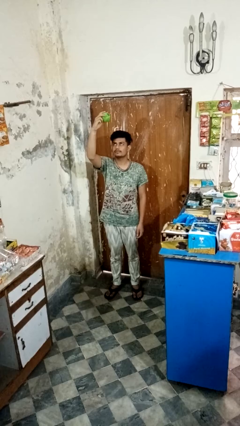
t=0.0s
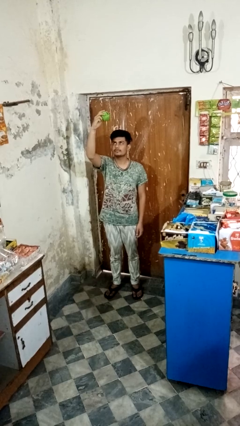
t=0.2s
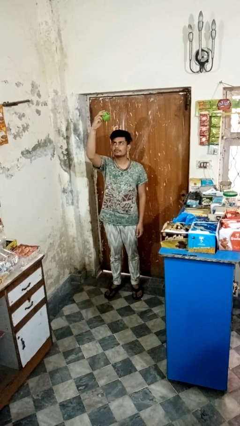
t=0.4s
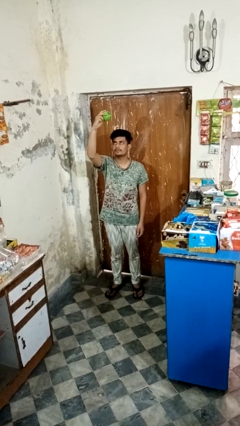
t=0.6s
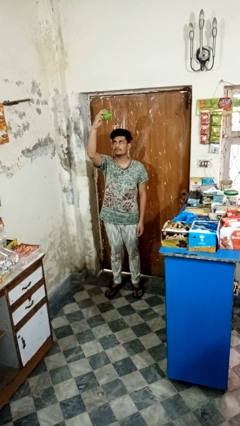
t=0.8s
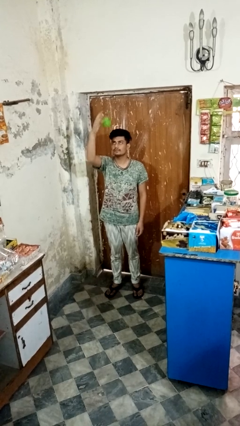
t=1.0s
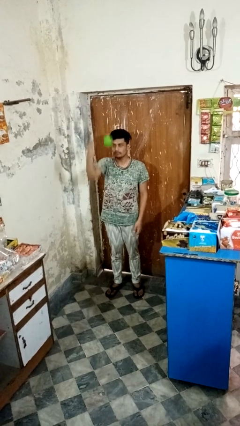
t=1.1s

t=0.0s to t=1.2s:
person drops object

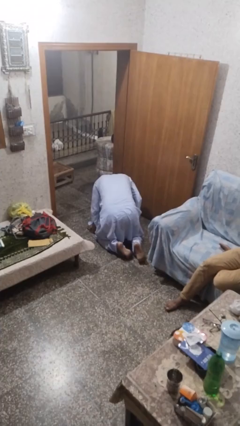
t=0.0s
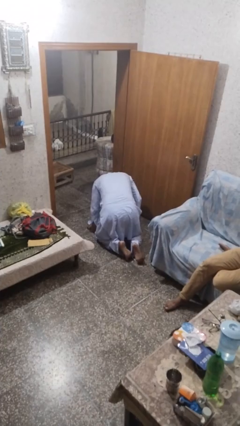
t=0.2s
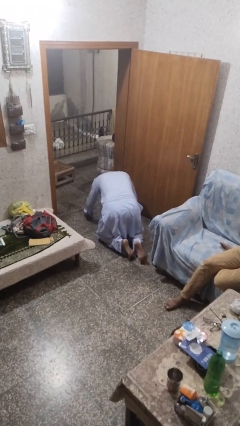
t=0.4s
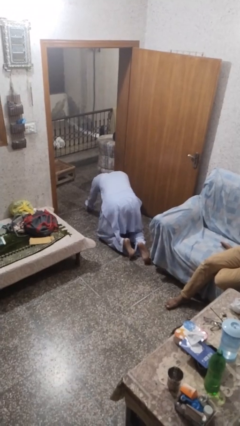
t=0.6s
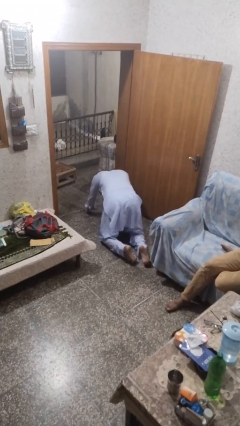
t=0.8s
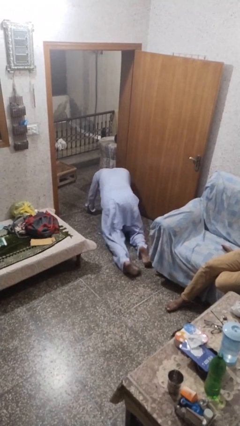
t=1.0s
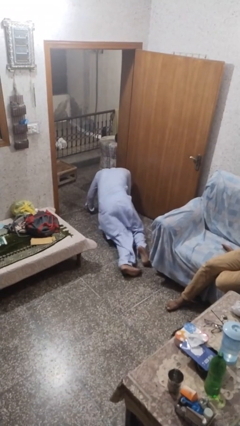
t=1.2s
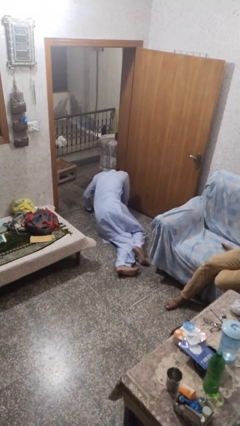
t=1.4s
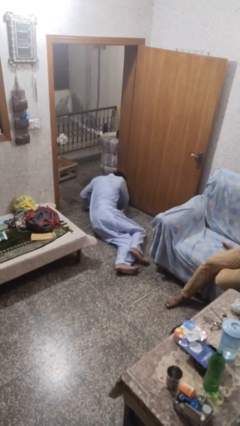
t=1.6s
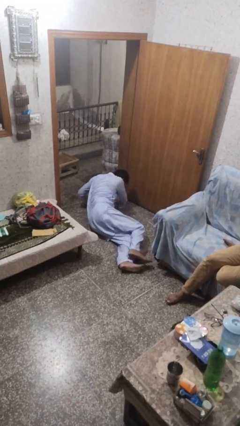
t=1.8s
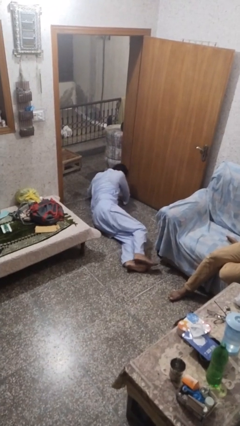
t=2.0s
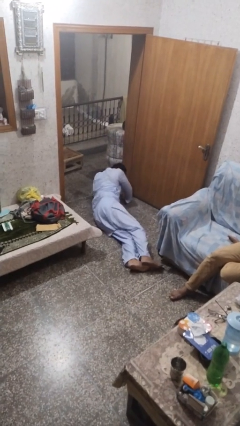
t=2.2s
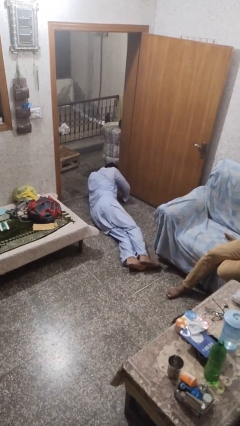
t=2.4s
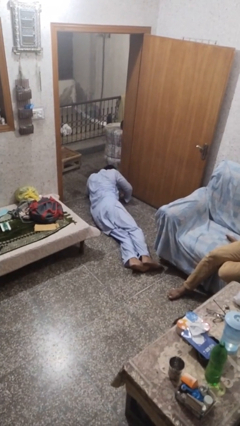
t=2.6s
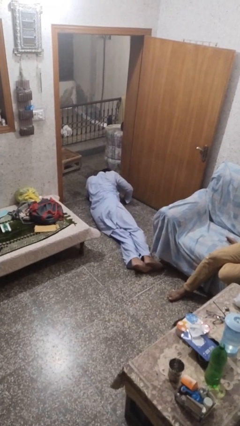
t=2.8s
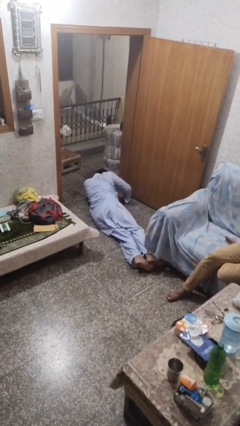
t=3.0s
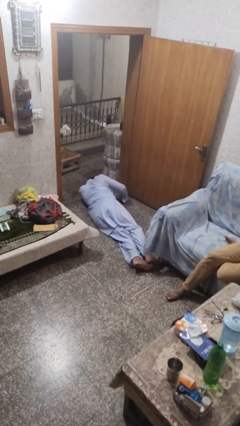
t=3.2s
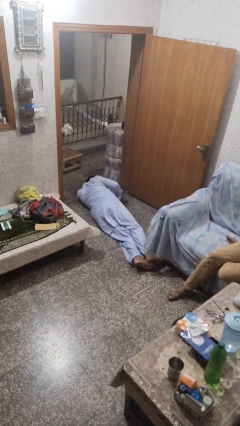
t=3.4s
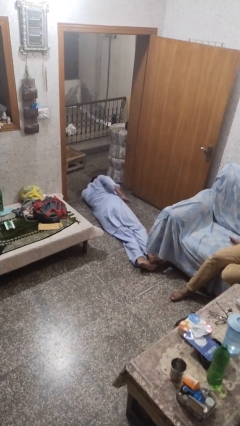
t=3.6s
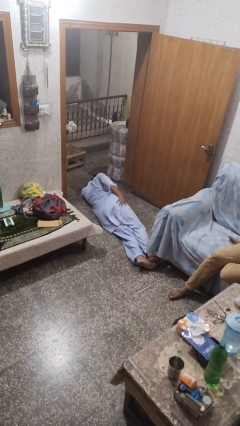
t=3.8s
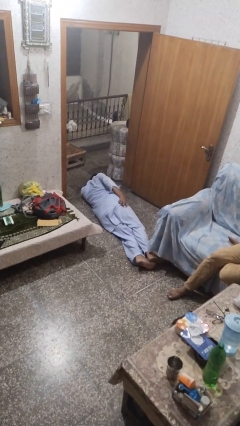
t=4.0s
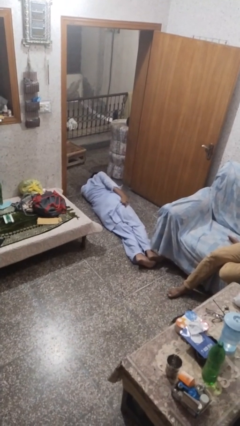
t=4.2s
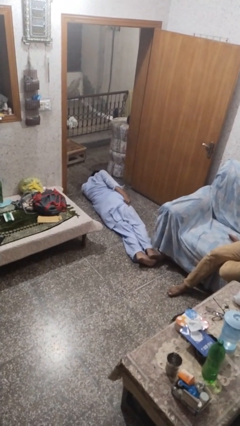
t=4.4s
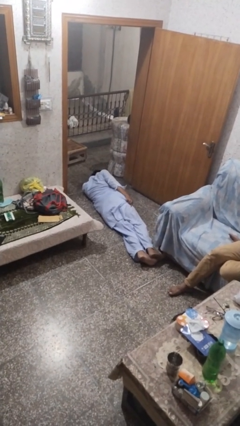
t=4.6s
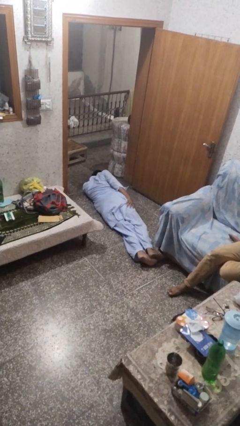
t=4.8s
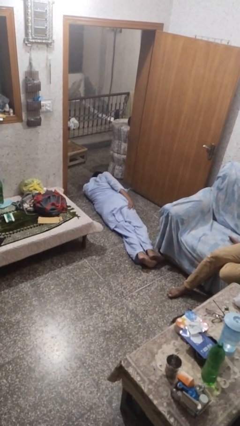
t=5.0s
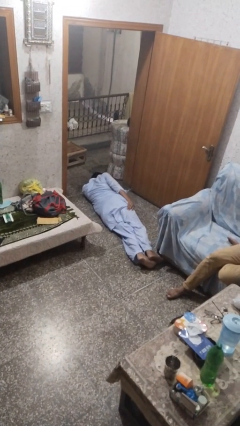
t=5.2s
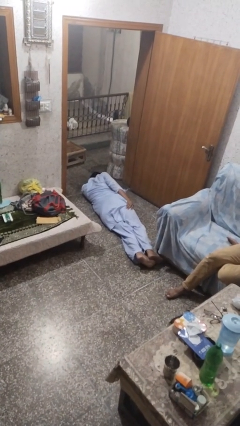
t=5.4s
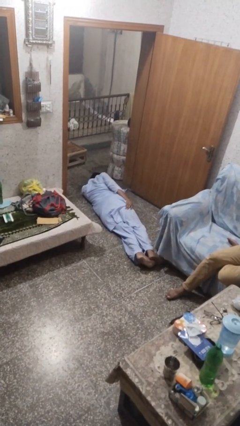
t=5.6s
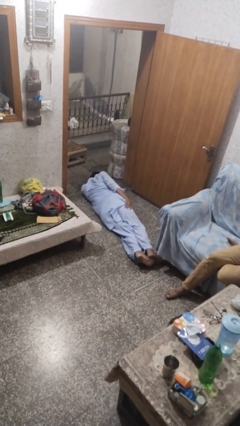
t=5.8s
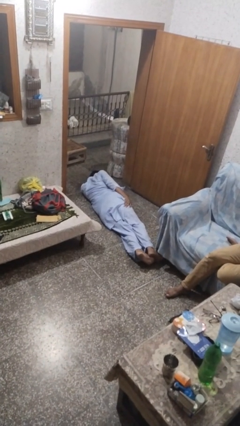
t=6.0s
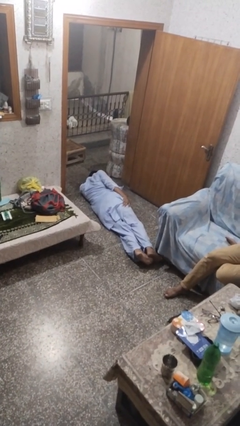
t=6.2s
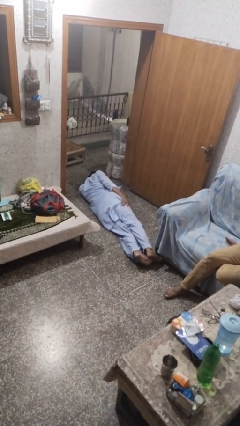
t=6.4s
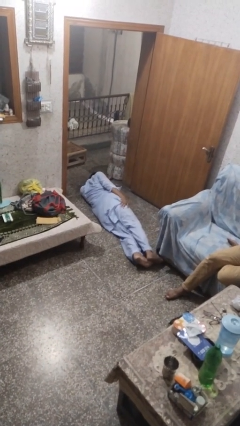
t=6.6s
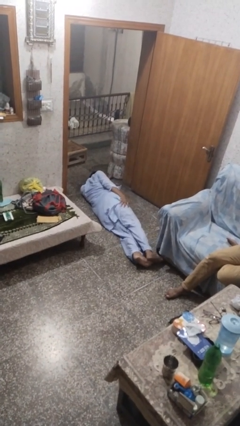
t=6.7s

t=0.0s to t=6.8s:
person lies down on floor

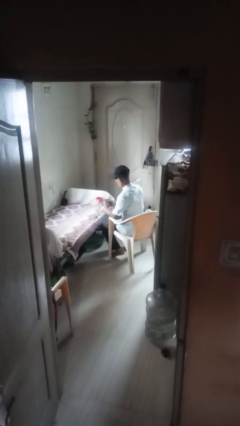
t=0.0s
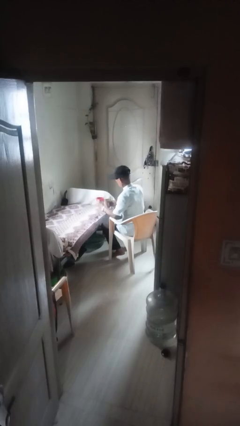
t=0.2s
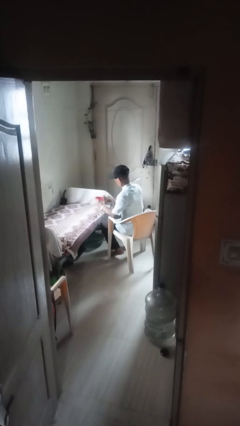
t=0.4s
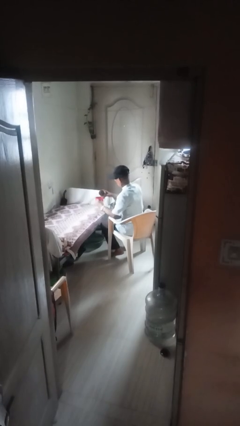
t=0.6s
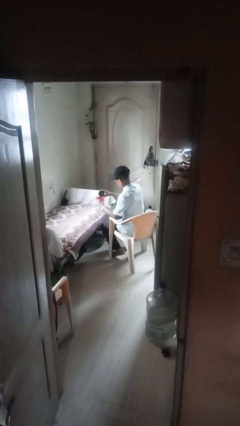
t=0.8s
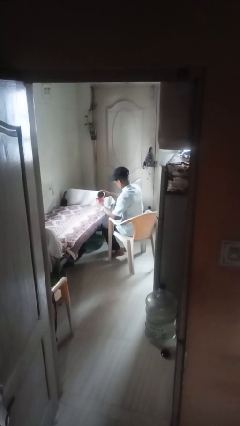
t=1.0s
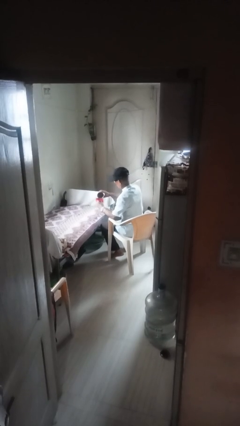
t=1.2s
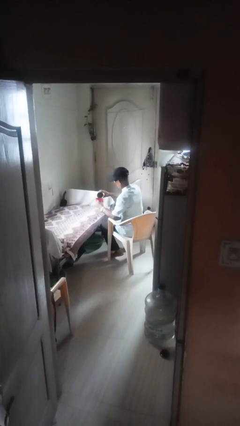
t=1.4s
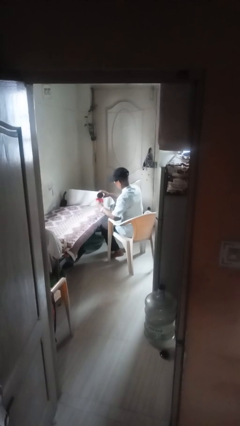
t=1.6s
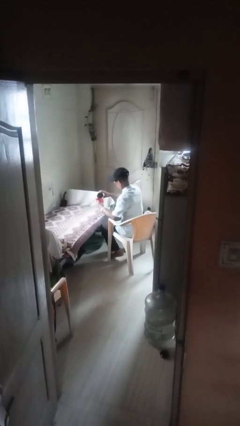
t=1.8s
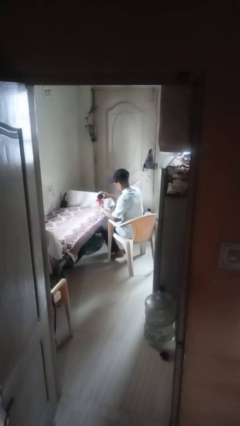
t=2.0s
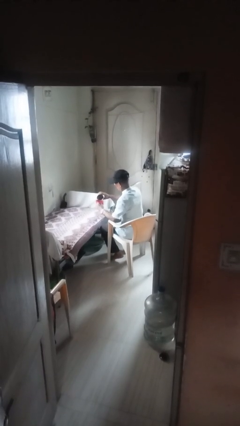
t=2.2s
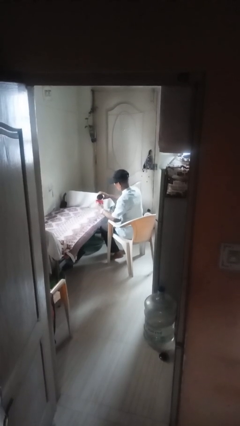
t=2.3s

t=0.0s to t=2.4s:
person pours coffee into mug

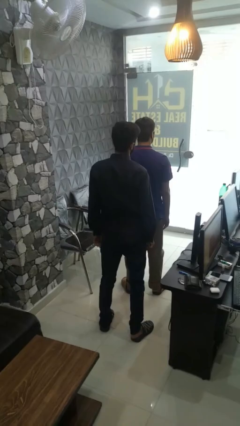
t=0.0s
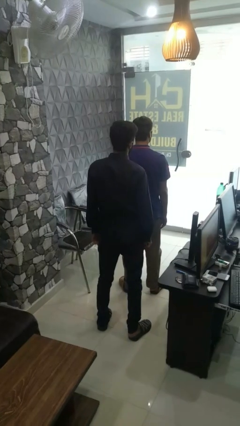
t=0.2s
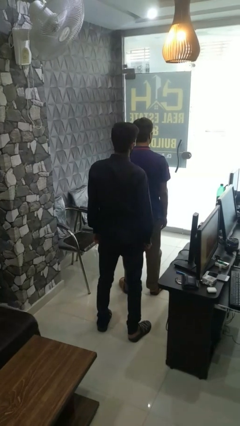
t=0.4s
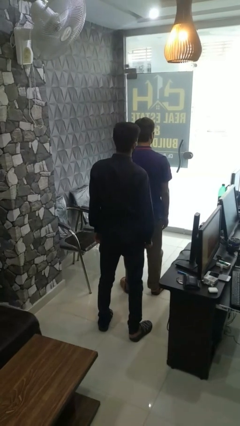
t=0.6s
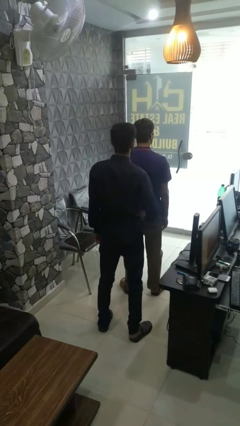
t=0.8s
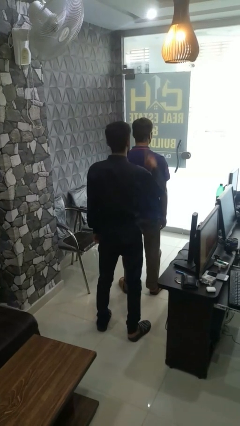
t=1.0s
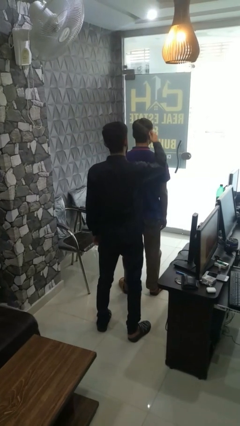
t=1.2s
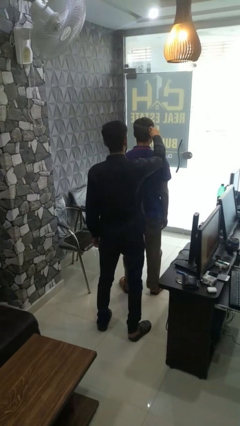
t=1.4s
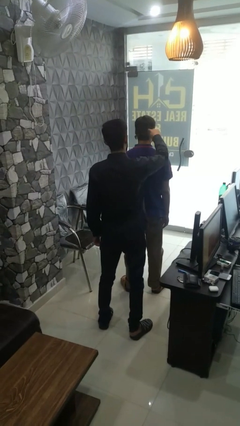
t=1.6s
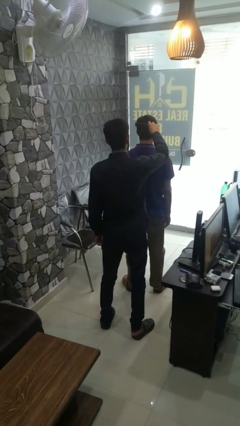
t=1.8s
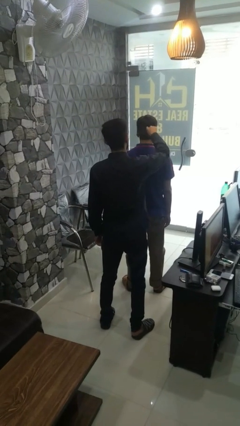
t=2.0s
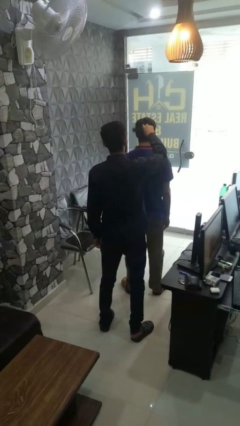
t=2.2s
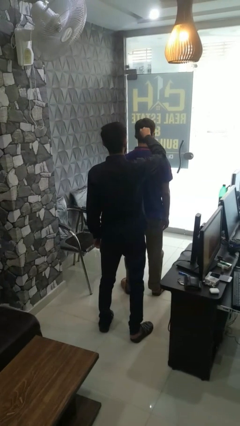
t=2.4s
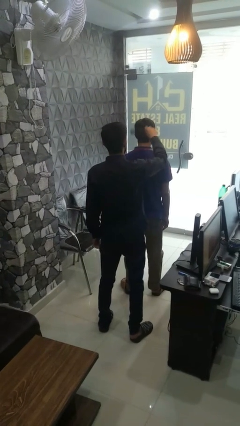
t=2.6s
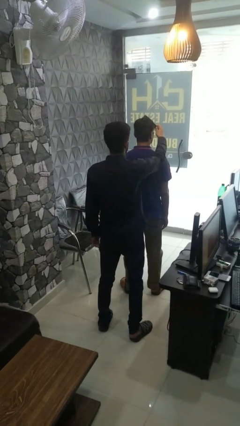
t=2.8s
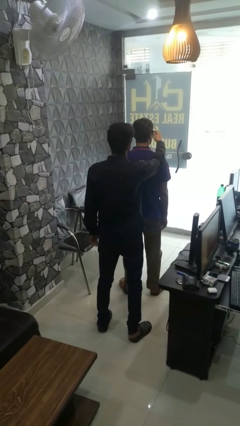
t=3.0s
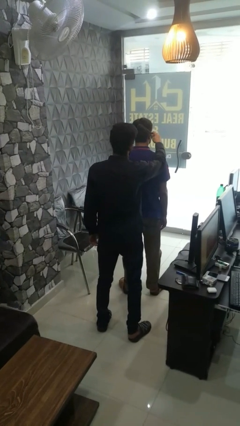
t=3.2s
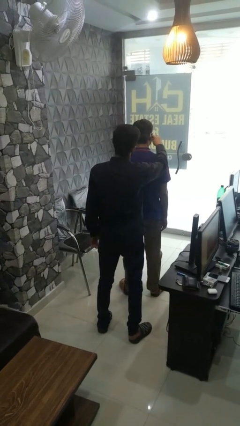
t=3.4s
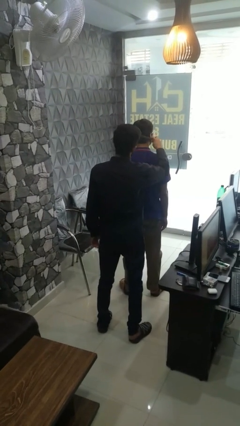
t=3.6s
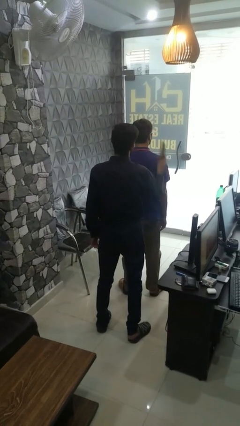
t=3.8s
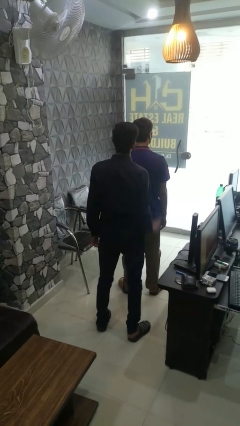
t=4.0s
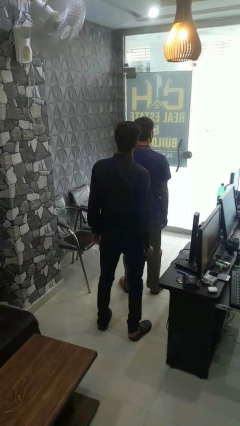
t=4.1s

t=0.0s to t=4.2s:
person brushes hair of person

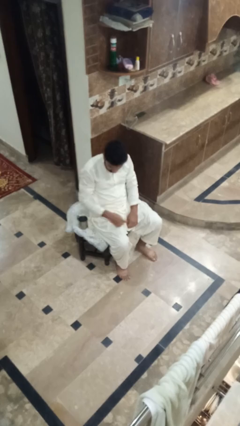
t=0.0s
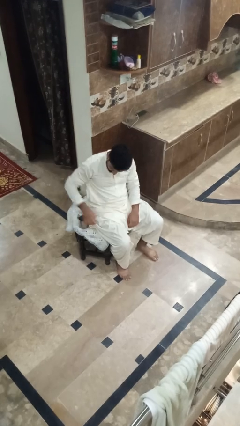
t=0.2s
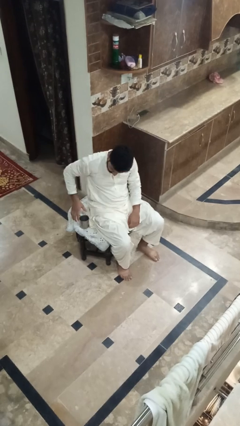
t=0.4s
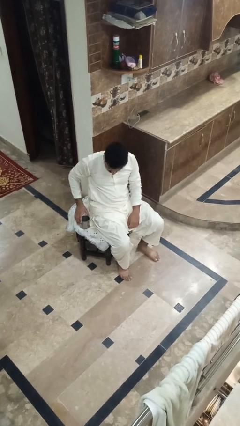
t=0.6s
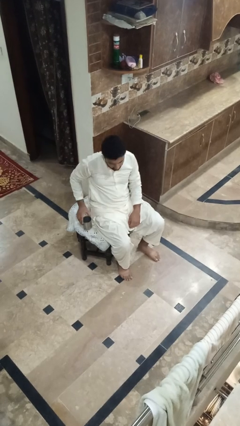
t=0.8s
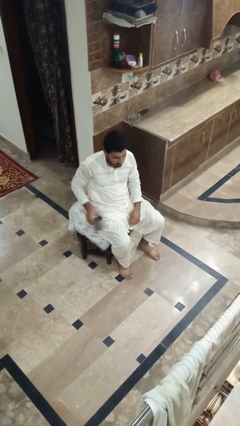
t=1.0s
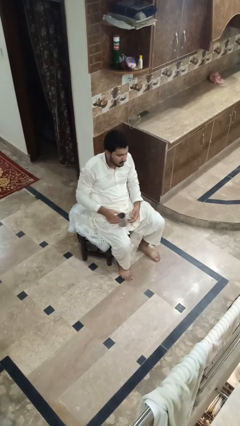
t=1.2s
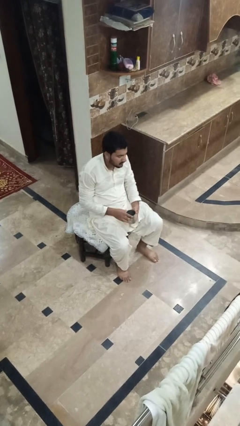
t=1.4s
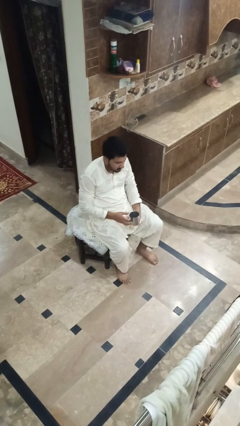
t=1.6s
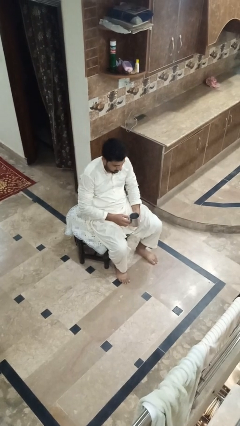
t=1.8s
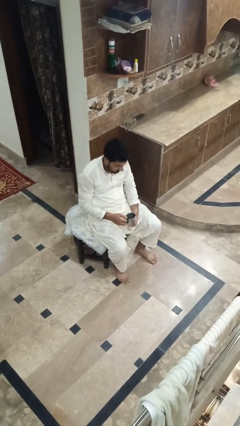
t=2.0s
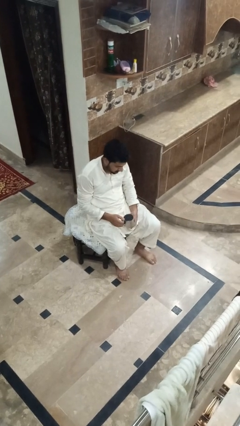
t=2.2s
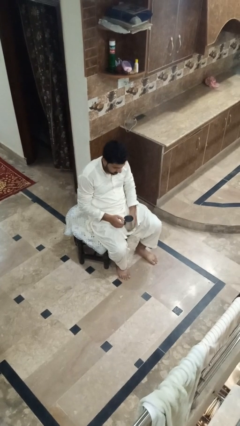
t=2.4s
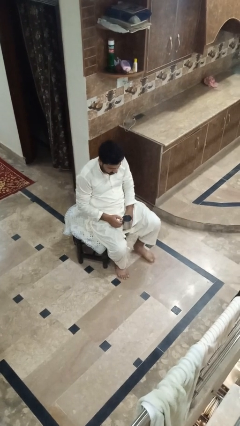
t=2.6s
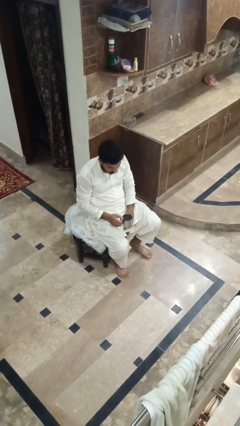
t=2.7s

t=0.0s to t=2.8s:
person picks up object from table
